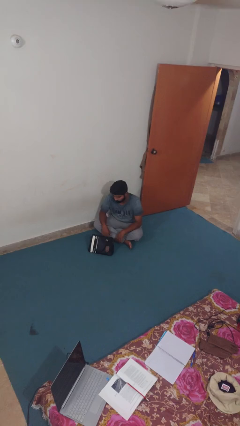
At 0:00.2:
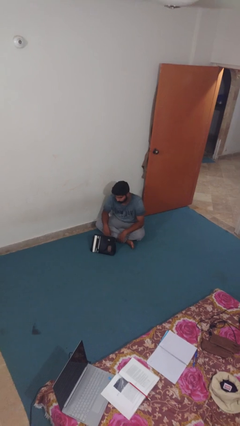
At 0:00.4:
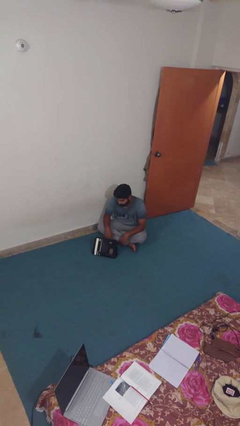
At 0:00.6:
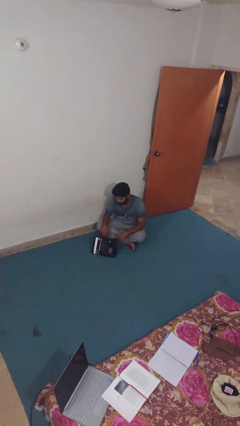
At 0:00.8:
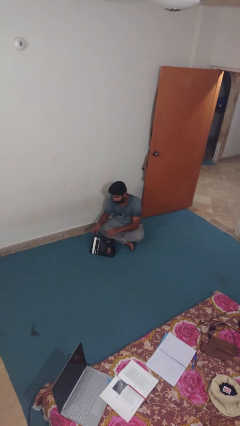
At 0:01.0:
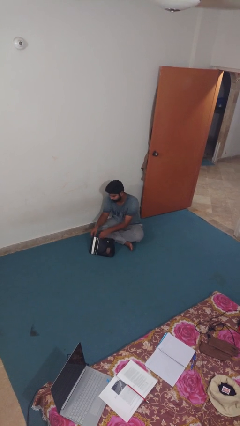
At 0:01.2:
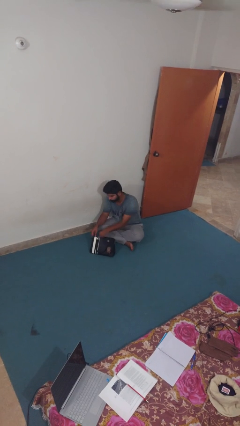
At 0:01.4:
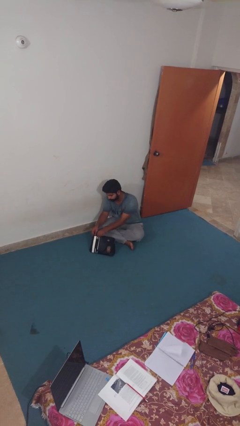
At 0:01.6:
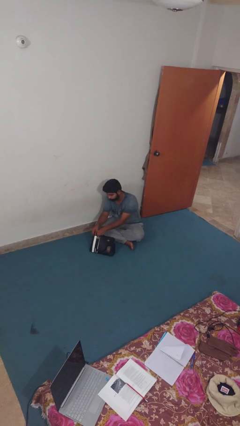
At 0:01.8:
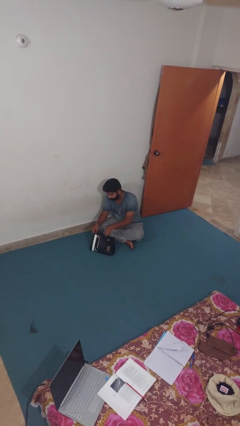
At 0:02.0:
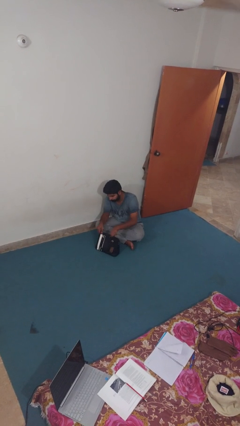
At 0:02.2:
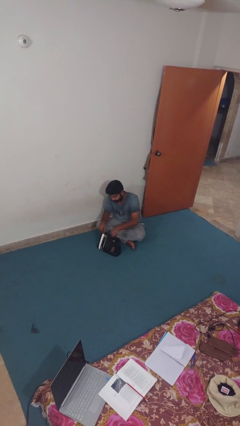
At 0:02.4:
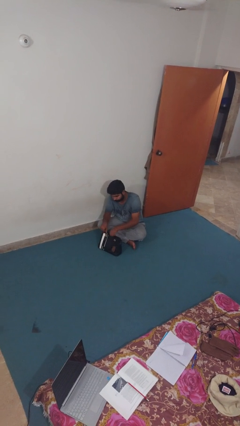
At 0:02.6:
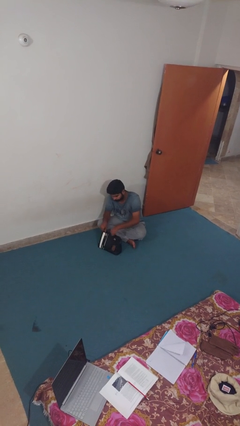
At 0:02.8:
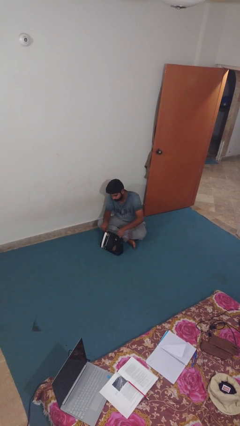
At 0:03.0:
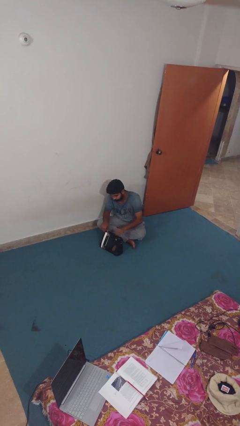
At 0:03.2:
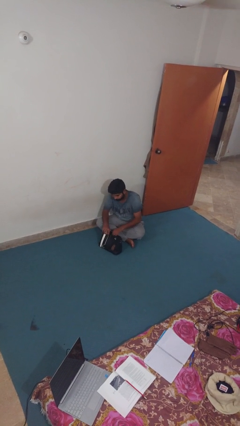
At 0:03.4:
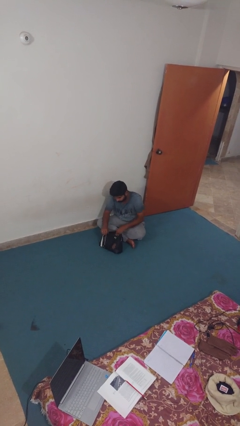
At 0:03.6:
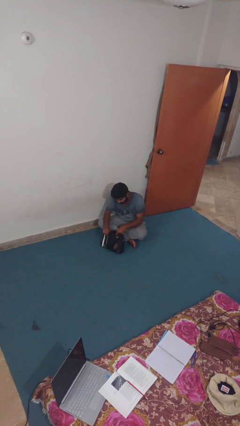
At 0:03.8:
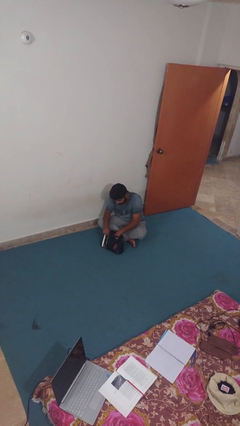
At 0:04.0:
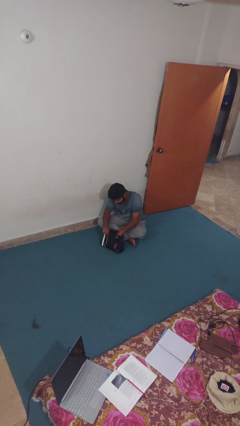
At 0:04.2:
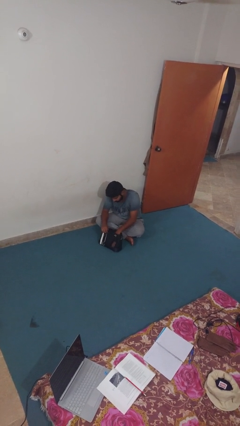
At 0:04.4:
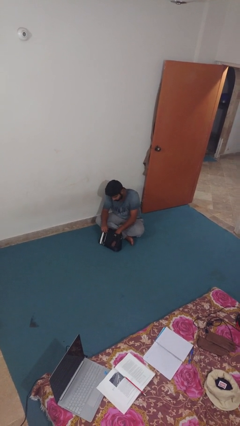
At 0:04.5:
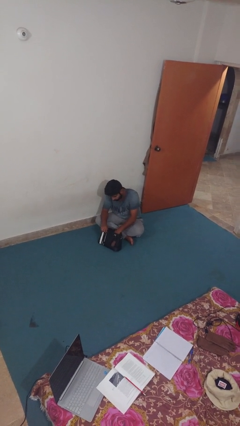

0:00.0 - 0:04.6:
person searches in purse

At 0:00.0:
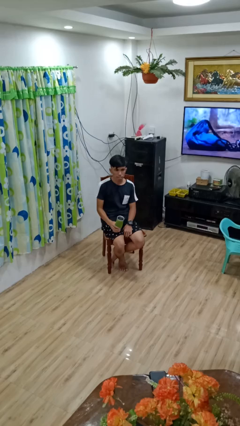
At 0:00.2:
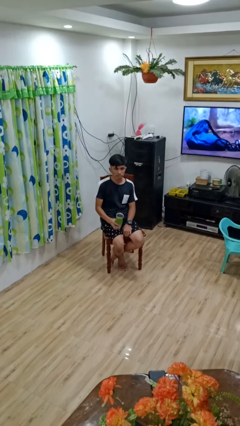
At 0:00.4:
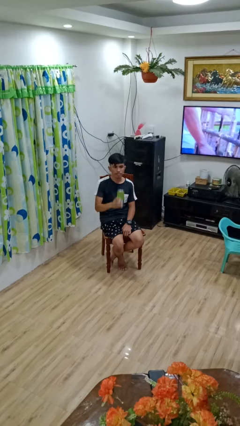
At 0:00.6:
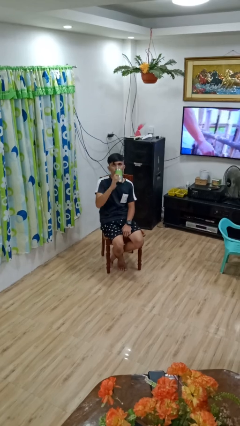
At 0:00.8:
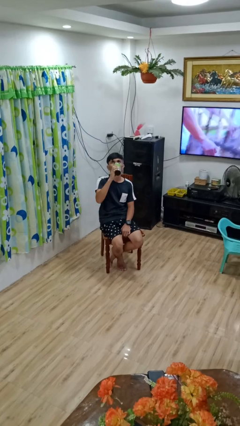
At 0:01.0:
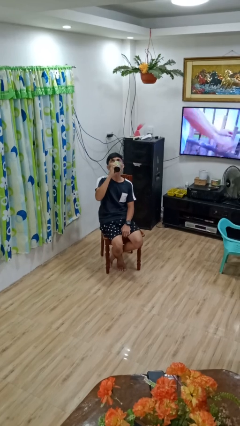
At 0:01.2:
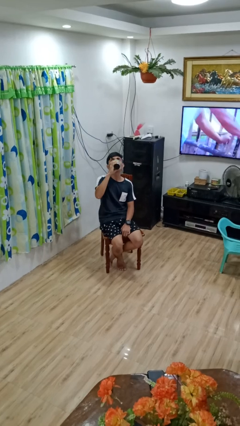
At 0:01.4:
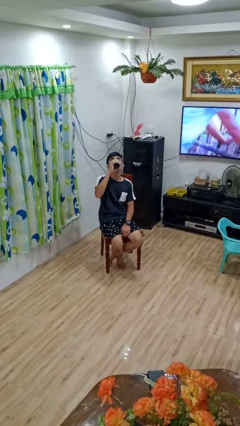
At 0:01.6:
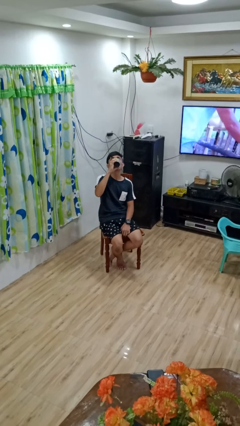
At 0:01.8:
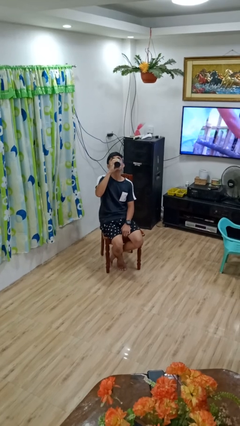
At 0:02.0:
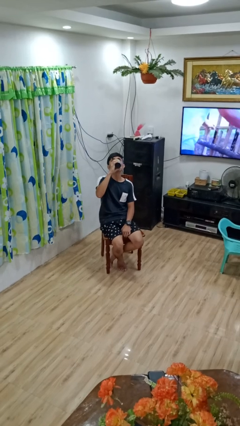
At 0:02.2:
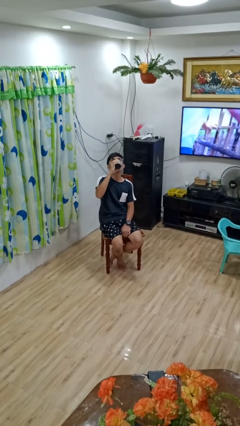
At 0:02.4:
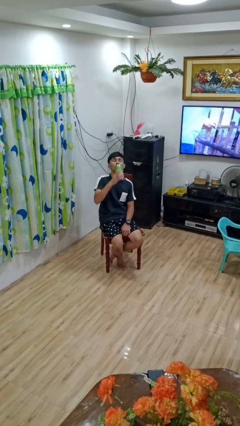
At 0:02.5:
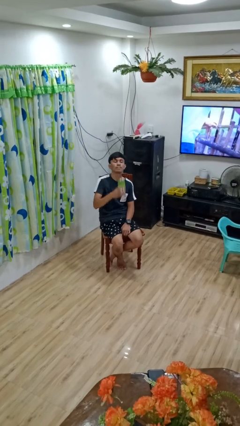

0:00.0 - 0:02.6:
person drinks from bottle

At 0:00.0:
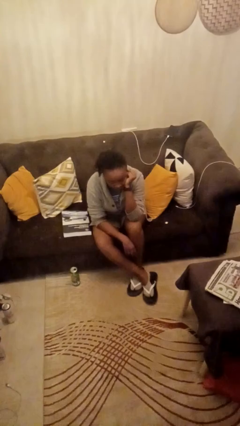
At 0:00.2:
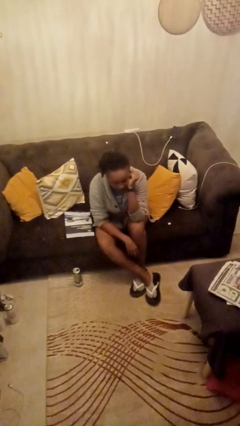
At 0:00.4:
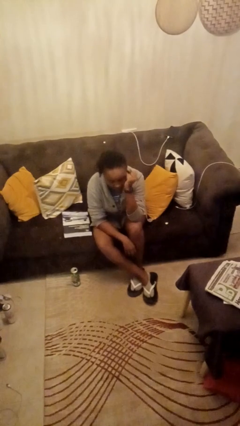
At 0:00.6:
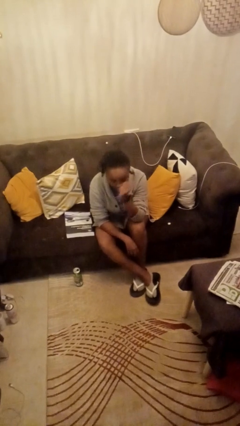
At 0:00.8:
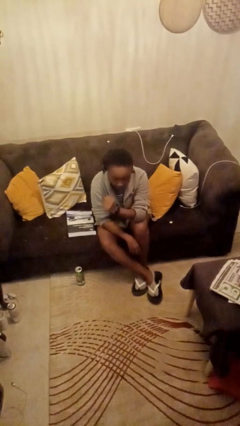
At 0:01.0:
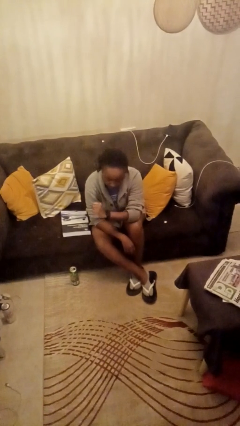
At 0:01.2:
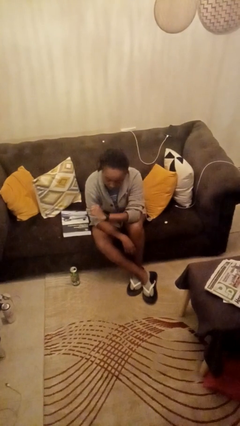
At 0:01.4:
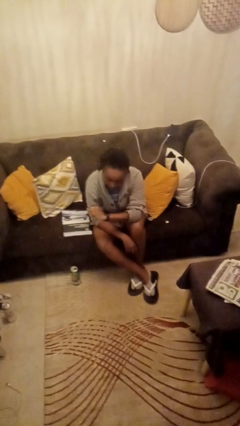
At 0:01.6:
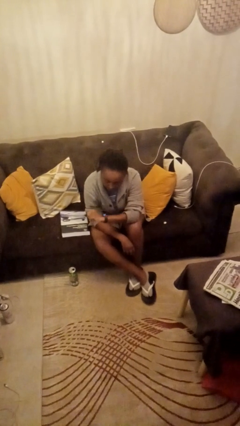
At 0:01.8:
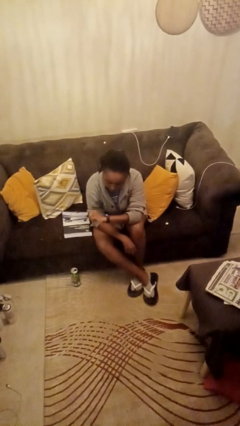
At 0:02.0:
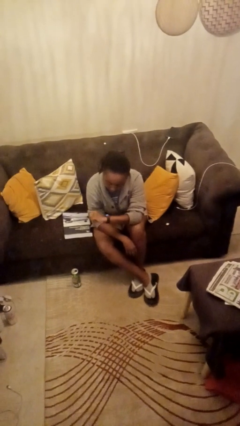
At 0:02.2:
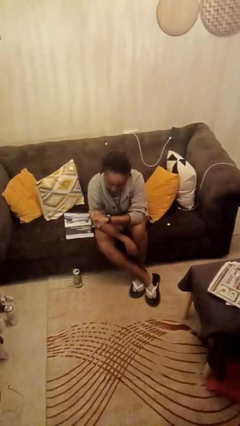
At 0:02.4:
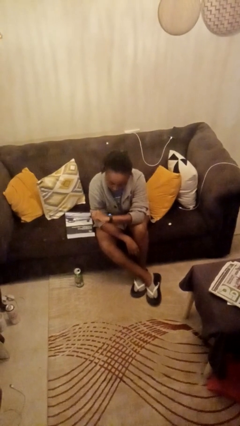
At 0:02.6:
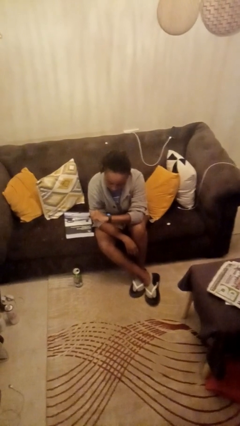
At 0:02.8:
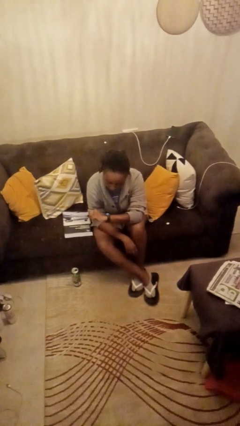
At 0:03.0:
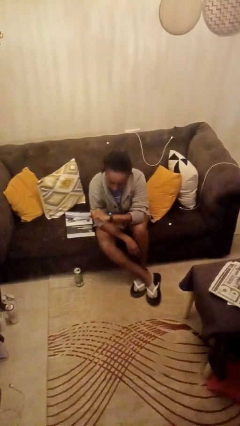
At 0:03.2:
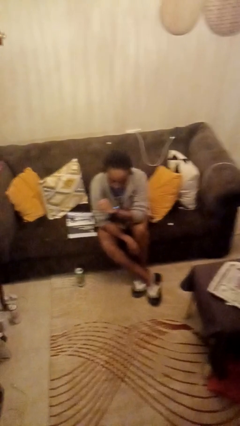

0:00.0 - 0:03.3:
person looks at wristwatch

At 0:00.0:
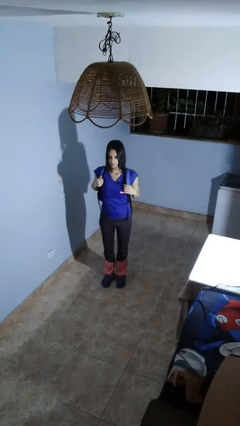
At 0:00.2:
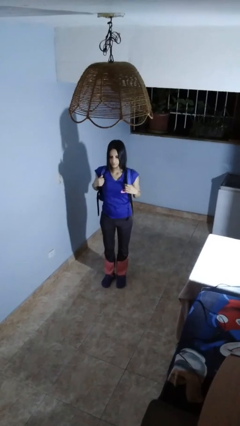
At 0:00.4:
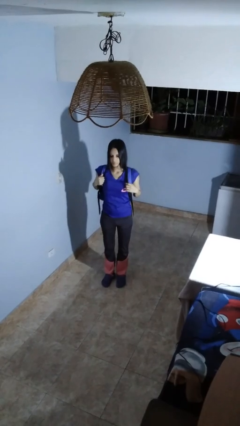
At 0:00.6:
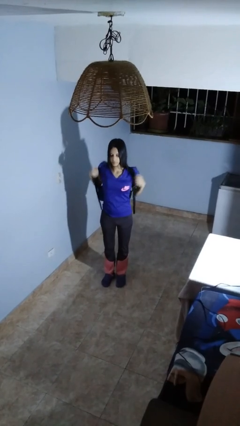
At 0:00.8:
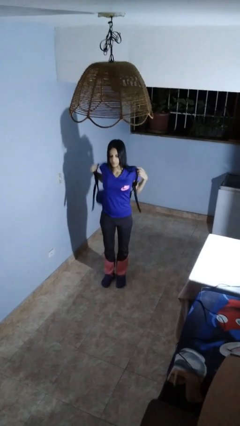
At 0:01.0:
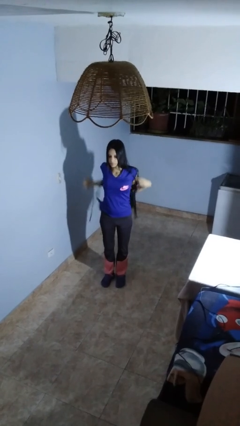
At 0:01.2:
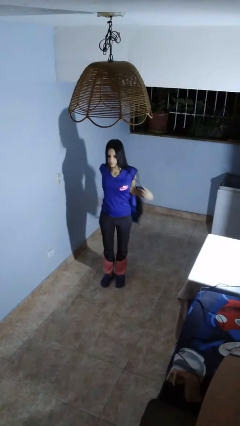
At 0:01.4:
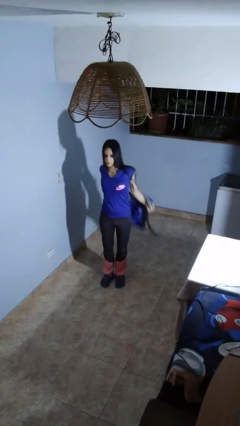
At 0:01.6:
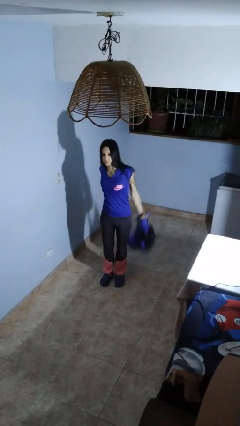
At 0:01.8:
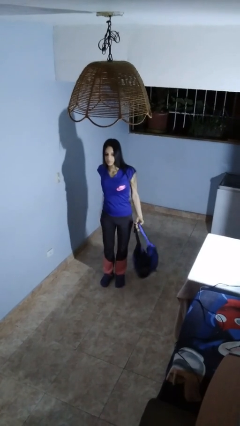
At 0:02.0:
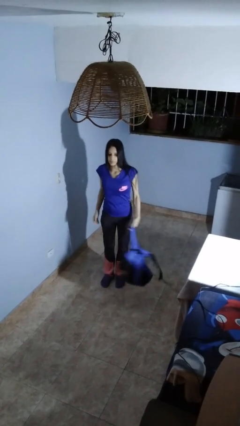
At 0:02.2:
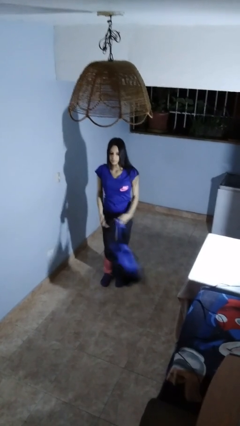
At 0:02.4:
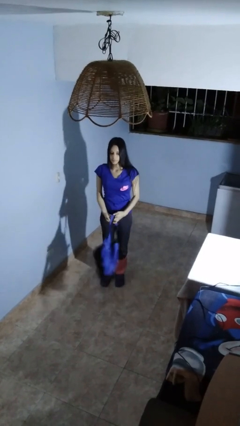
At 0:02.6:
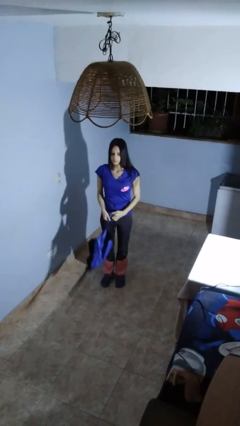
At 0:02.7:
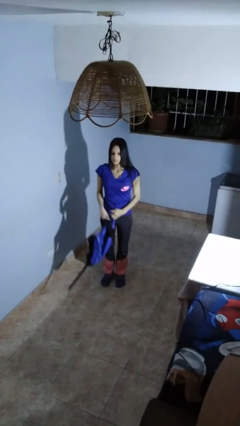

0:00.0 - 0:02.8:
person takes off backpack

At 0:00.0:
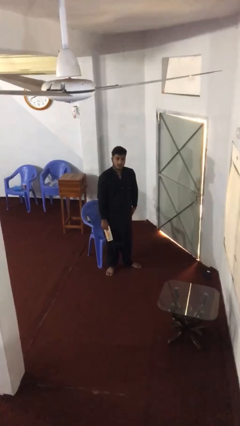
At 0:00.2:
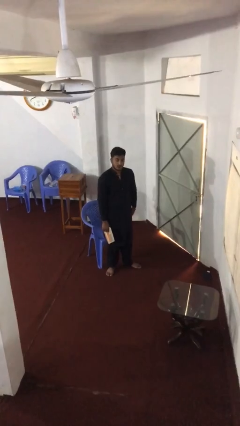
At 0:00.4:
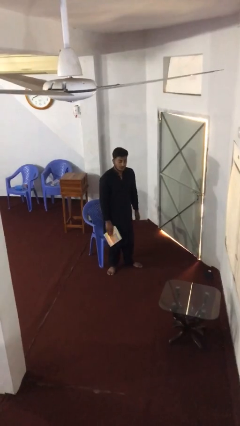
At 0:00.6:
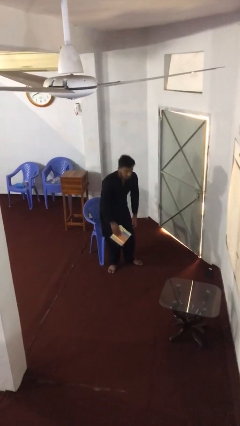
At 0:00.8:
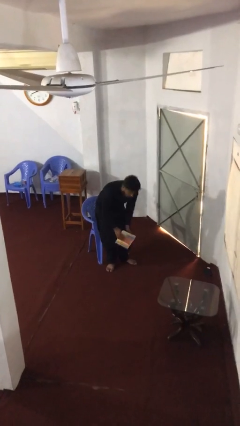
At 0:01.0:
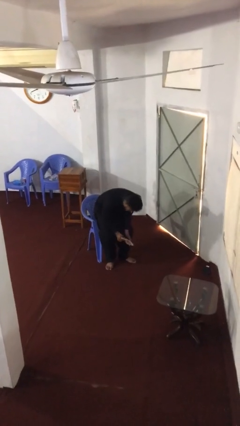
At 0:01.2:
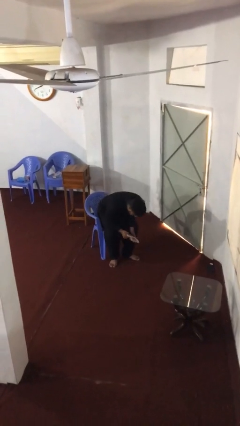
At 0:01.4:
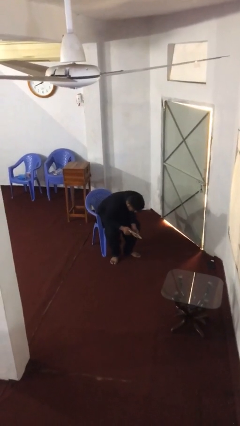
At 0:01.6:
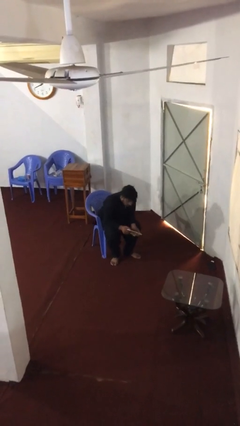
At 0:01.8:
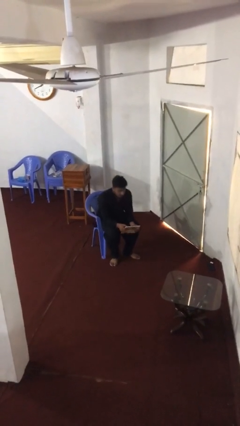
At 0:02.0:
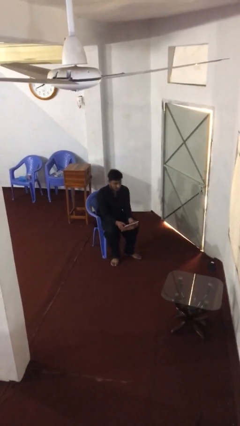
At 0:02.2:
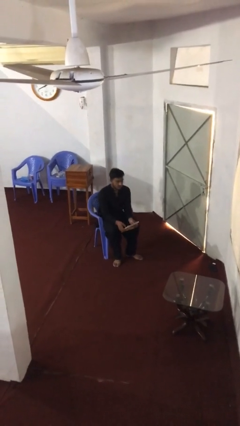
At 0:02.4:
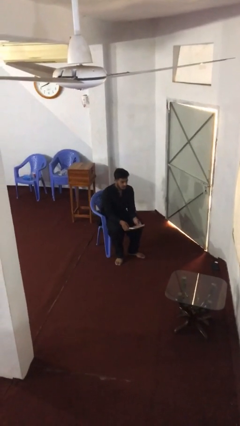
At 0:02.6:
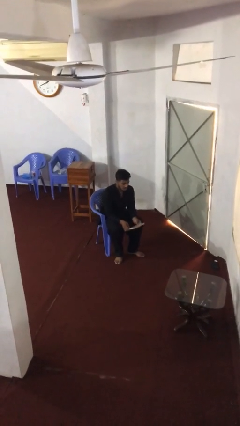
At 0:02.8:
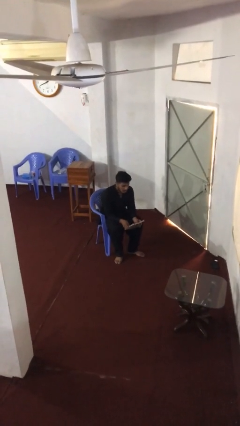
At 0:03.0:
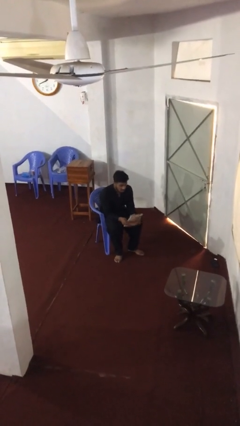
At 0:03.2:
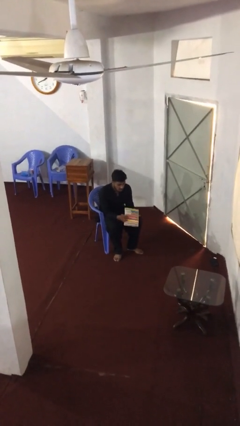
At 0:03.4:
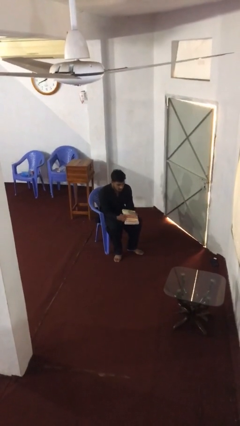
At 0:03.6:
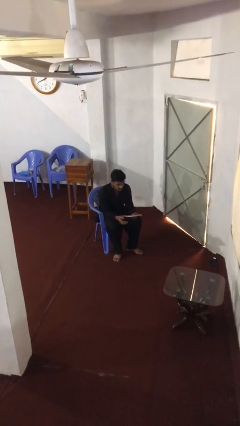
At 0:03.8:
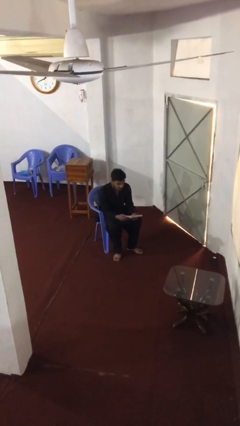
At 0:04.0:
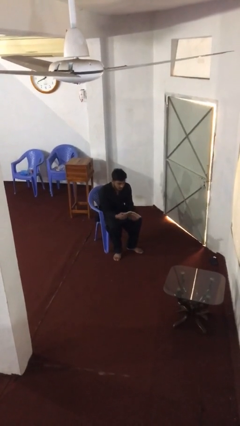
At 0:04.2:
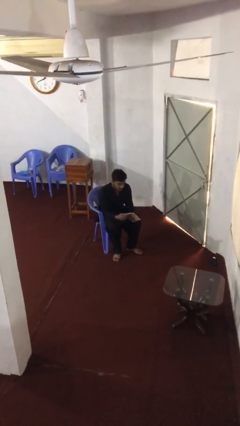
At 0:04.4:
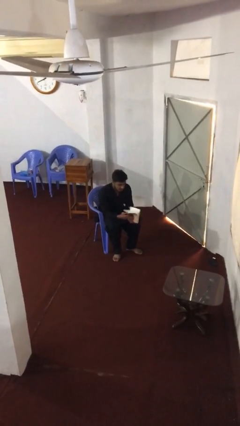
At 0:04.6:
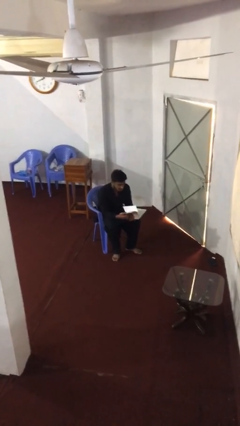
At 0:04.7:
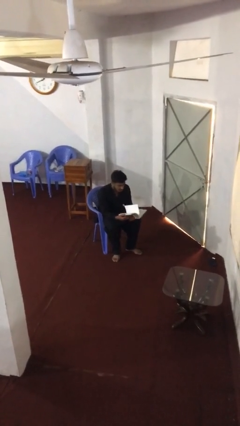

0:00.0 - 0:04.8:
person sits down
